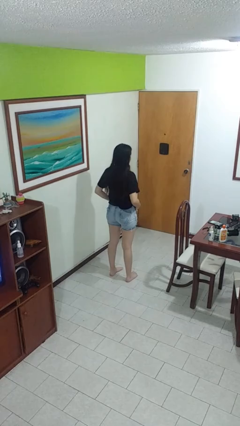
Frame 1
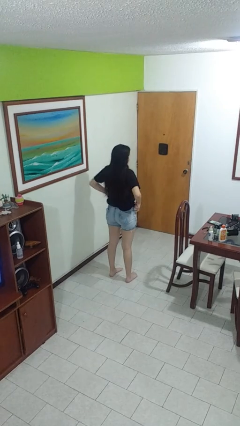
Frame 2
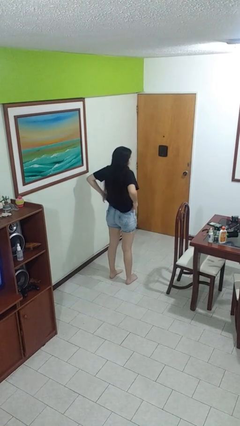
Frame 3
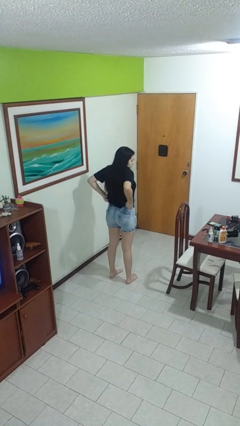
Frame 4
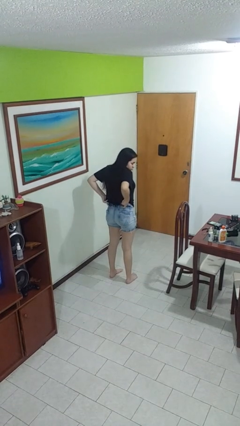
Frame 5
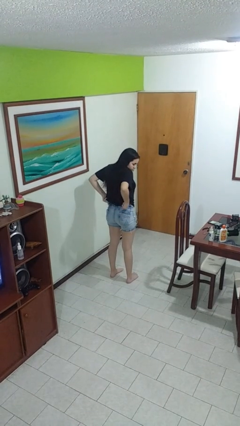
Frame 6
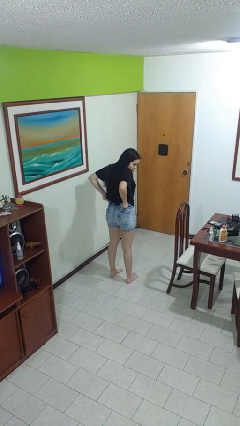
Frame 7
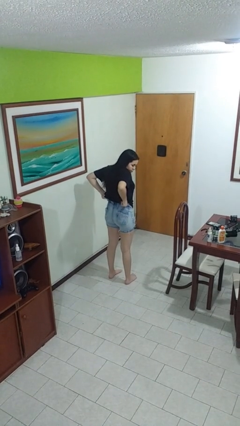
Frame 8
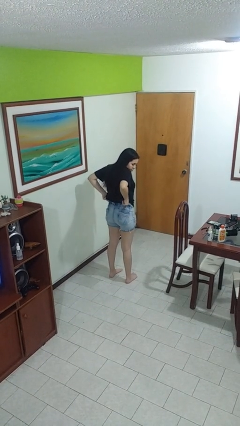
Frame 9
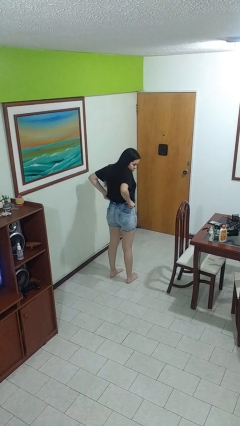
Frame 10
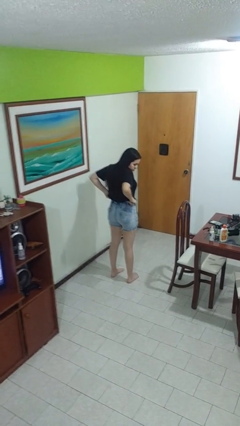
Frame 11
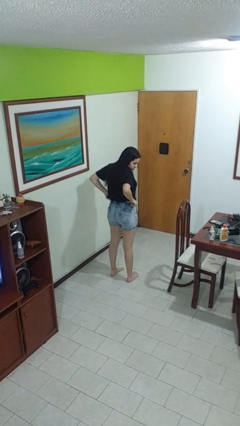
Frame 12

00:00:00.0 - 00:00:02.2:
person hikes up pants

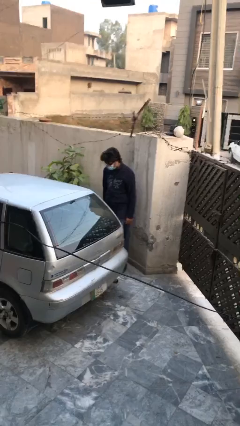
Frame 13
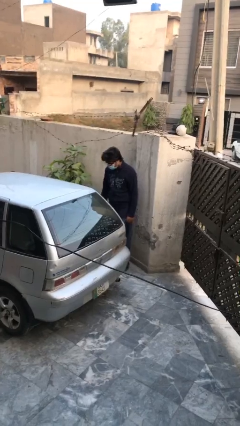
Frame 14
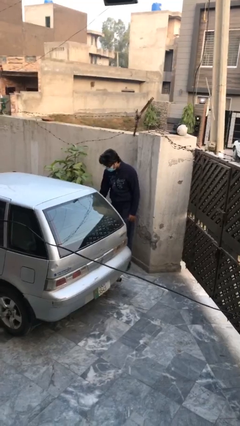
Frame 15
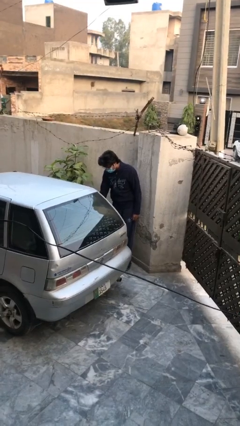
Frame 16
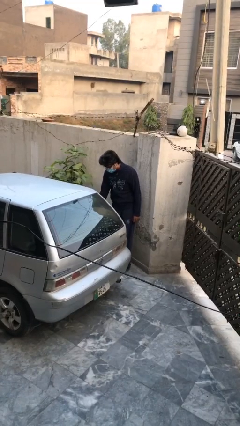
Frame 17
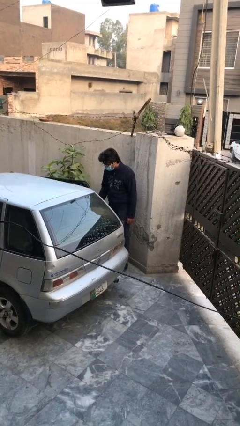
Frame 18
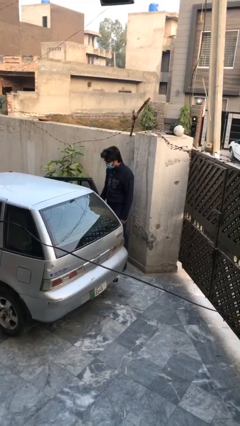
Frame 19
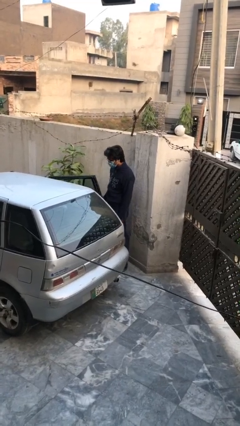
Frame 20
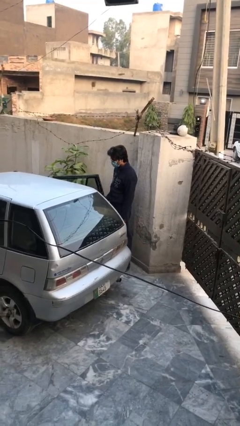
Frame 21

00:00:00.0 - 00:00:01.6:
person opens car door

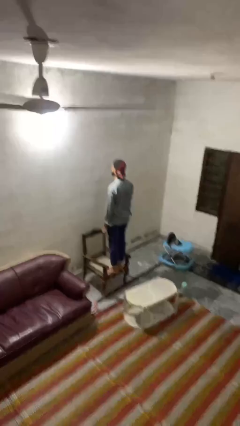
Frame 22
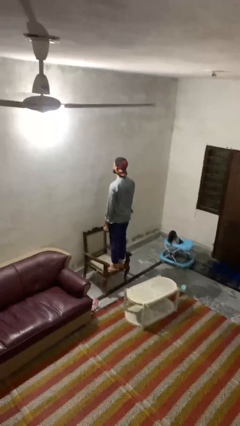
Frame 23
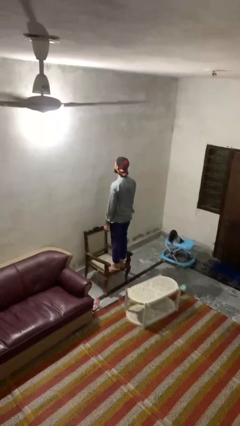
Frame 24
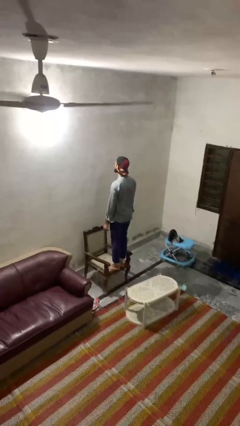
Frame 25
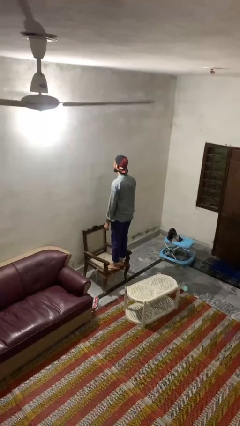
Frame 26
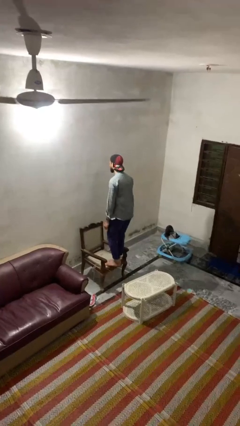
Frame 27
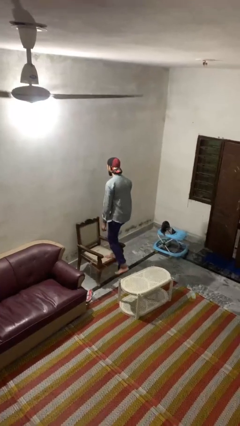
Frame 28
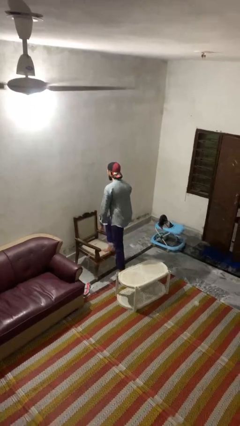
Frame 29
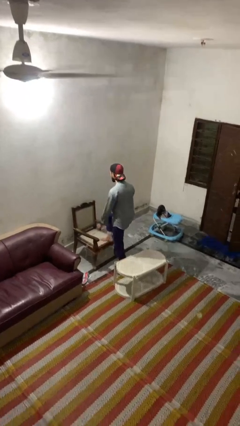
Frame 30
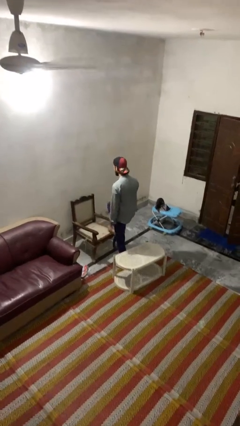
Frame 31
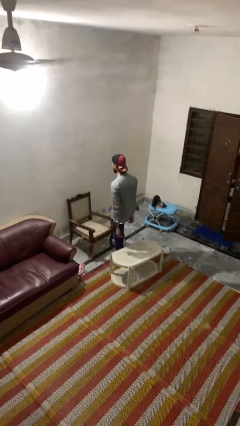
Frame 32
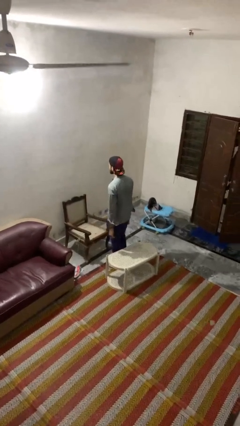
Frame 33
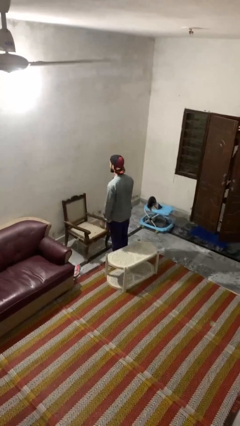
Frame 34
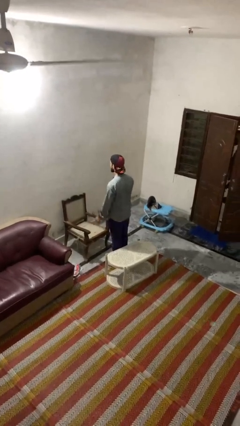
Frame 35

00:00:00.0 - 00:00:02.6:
person climbs off chair

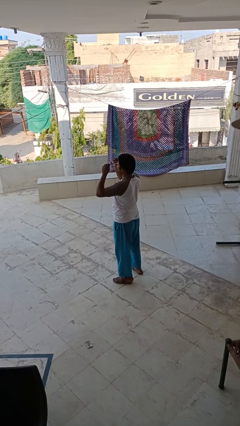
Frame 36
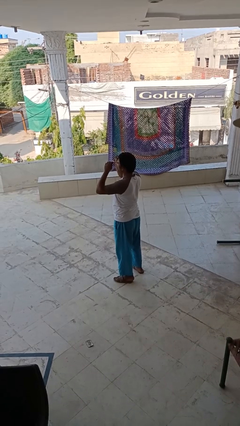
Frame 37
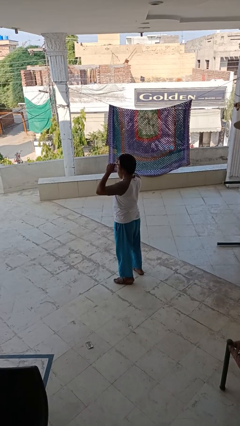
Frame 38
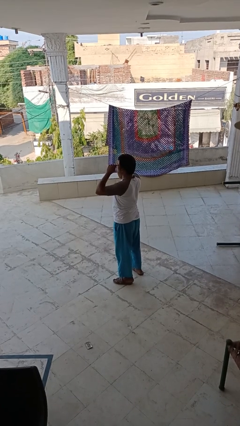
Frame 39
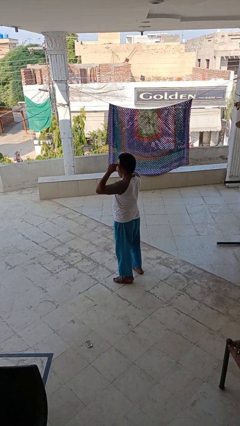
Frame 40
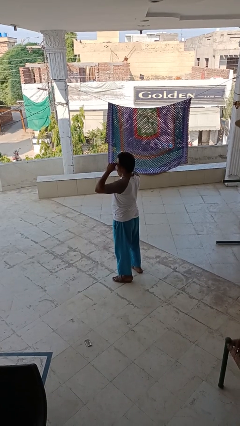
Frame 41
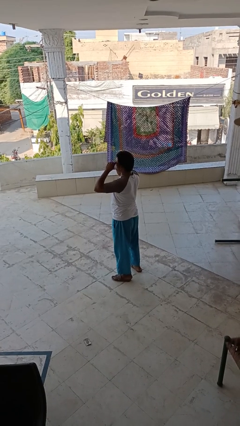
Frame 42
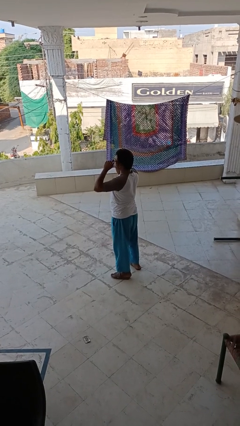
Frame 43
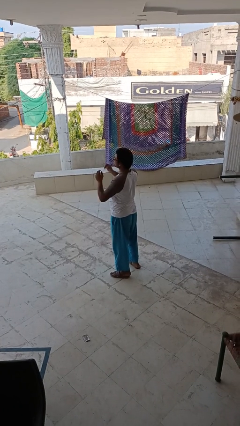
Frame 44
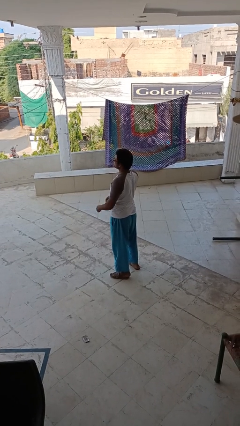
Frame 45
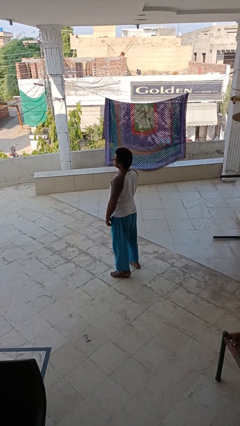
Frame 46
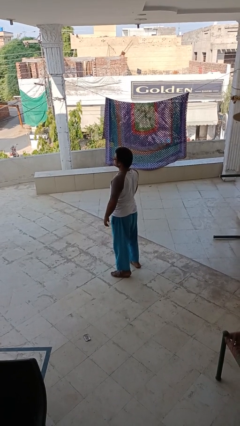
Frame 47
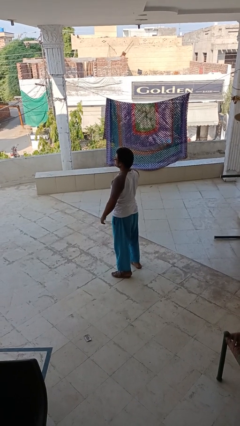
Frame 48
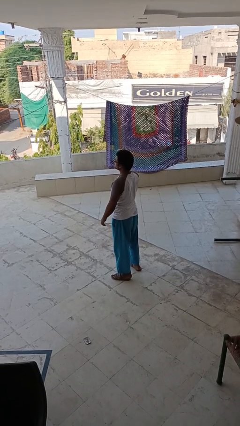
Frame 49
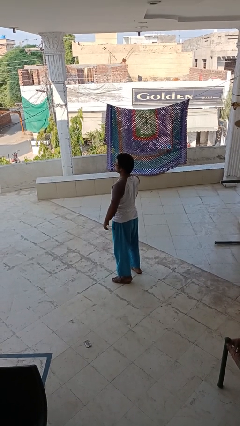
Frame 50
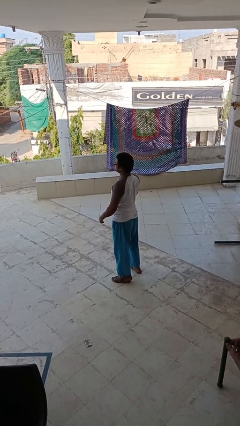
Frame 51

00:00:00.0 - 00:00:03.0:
person puts on glasses

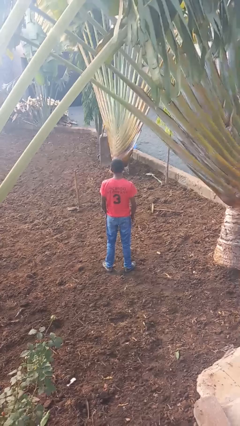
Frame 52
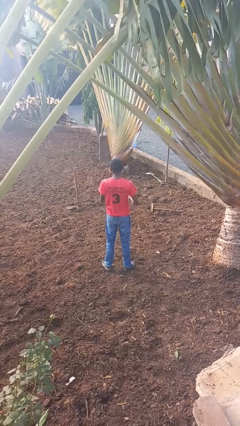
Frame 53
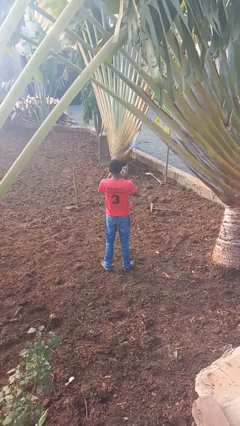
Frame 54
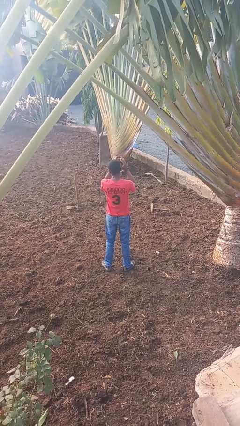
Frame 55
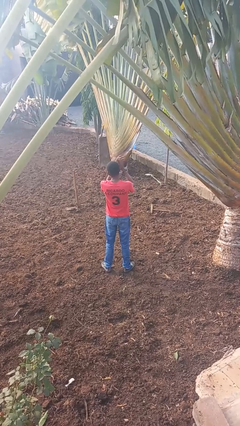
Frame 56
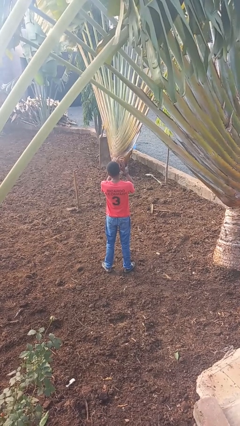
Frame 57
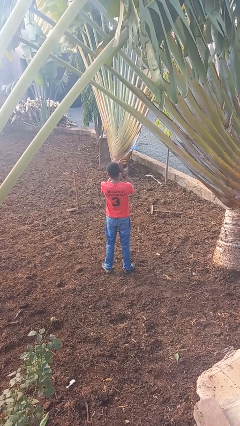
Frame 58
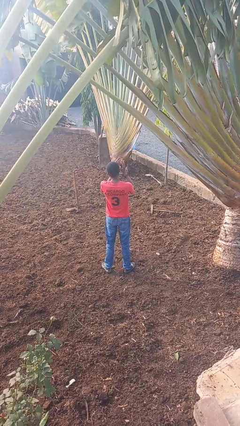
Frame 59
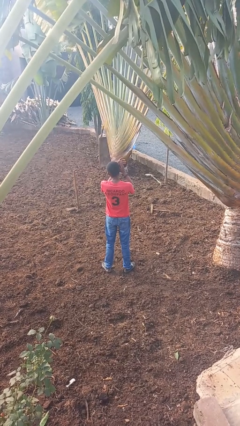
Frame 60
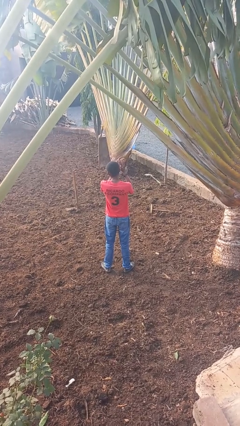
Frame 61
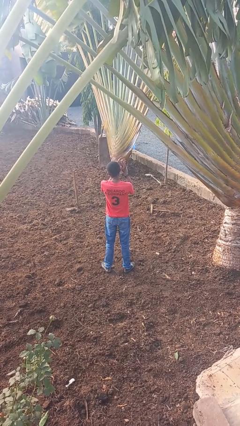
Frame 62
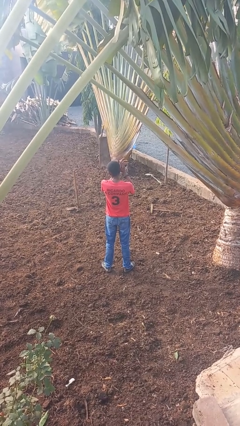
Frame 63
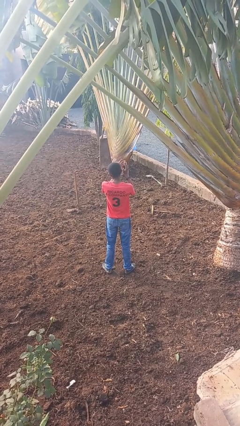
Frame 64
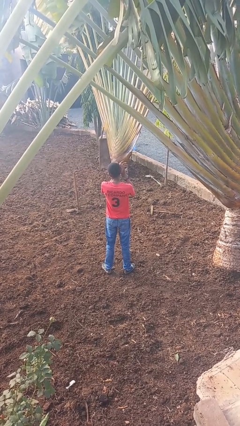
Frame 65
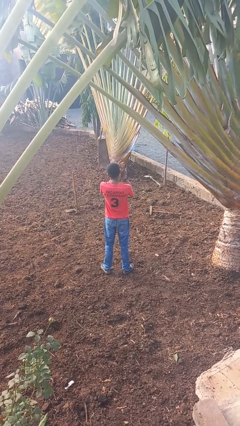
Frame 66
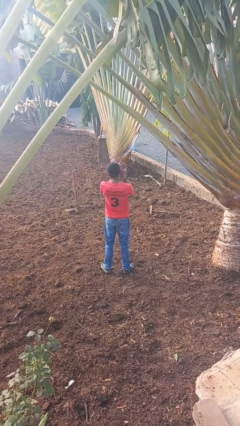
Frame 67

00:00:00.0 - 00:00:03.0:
person claps hands

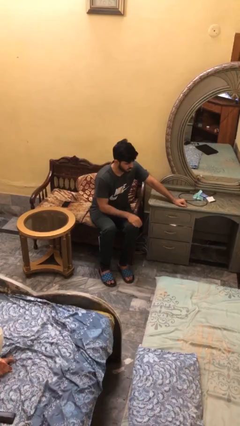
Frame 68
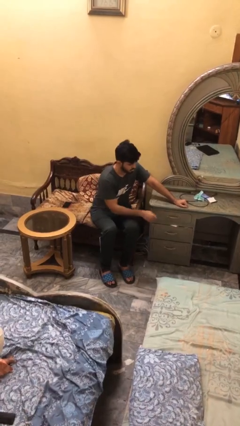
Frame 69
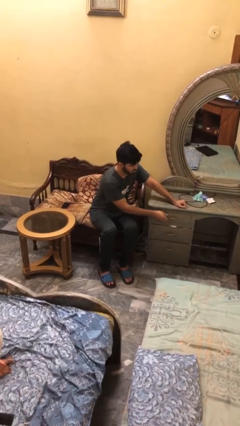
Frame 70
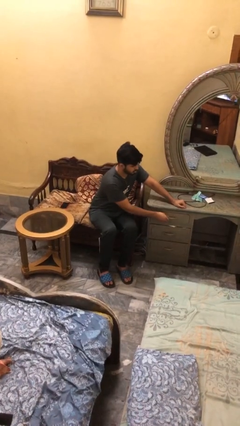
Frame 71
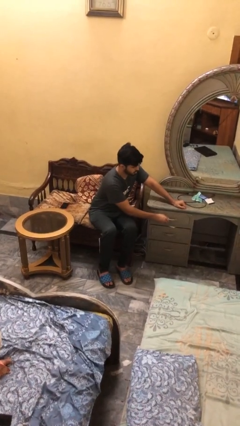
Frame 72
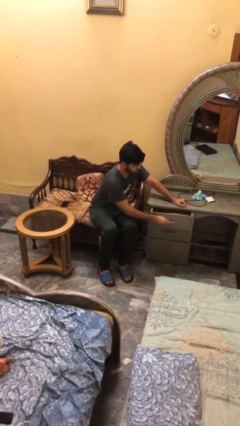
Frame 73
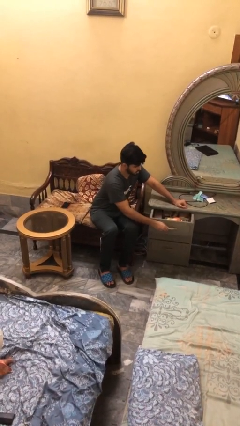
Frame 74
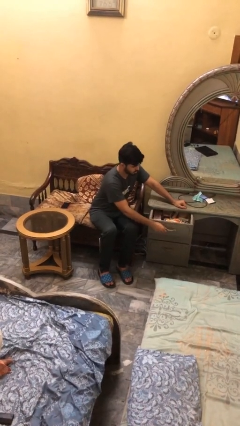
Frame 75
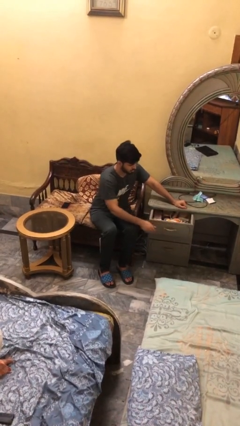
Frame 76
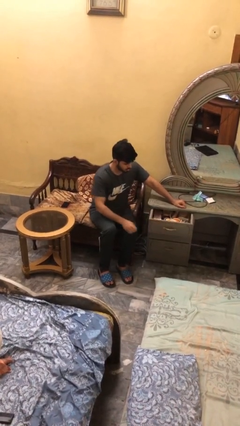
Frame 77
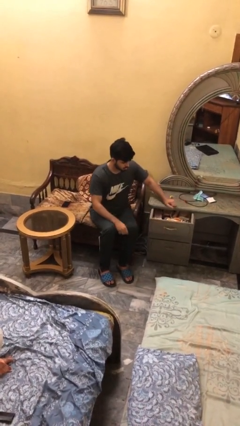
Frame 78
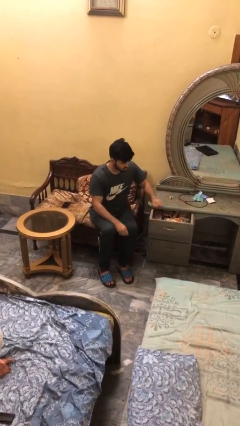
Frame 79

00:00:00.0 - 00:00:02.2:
person opens dresser drawer

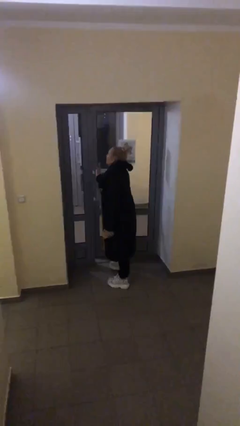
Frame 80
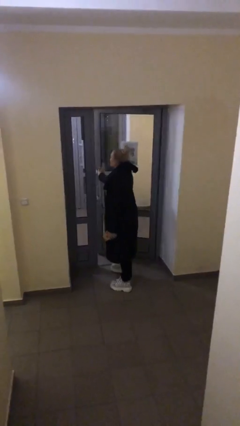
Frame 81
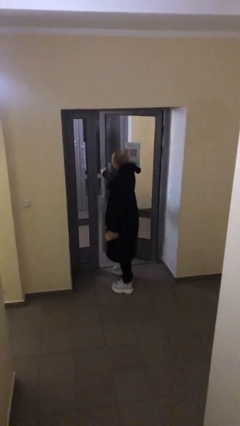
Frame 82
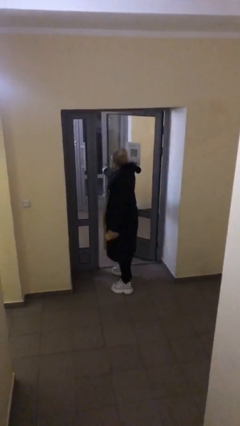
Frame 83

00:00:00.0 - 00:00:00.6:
person opens facility door

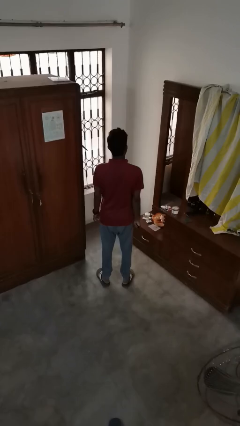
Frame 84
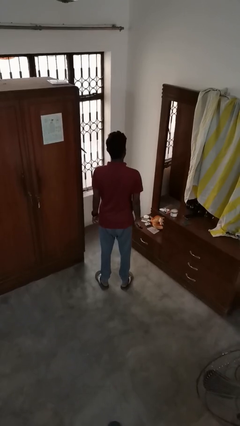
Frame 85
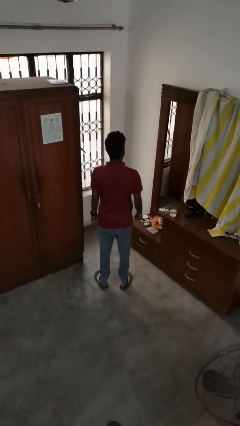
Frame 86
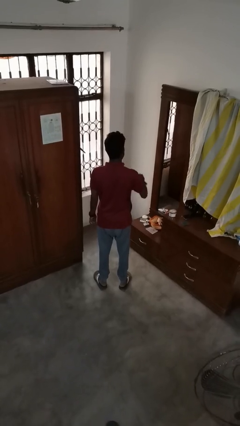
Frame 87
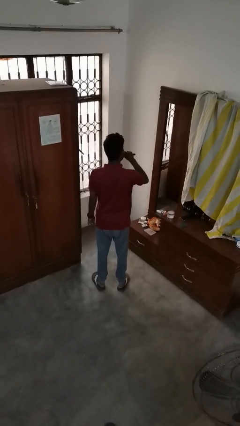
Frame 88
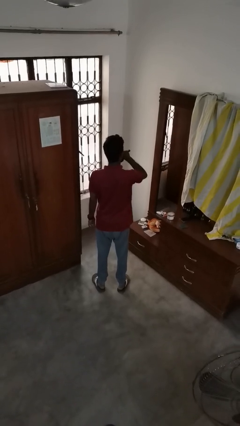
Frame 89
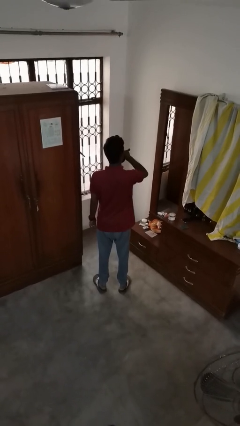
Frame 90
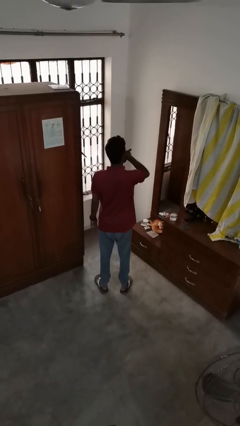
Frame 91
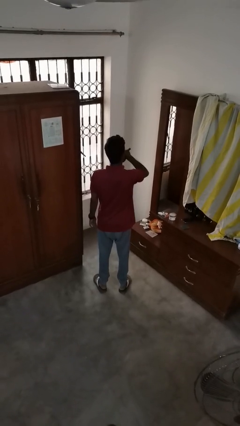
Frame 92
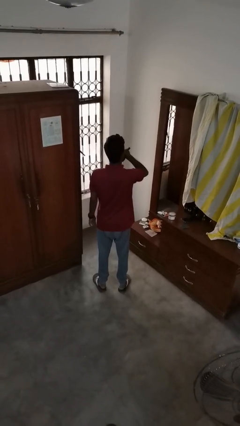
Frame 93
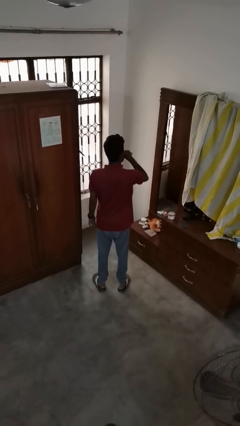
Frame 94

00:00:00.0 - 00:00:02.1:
person vapes
